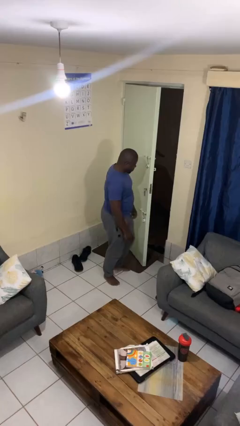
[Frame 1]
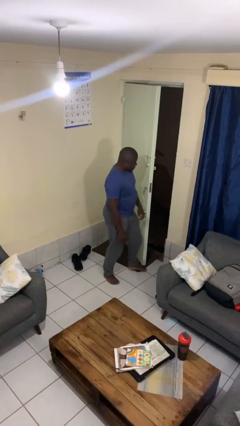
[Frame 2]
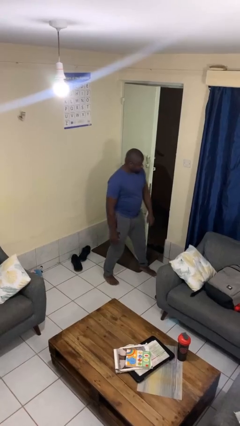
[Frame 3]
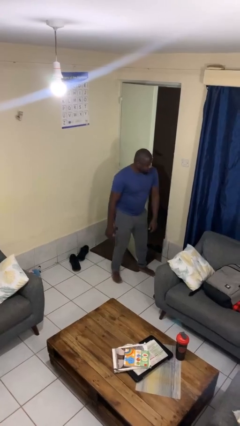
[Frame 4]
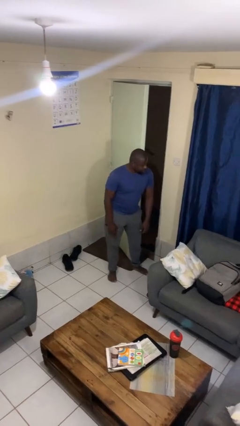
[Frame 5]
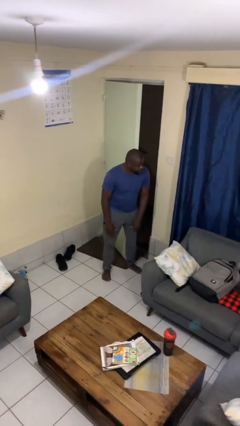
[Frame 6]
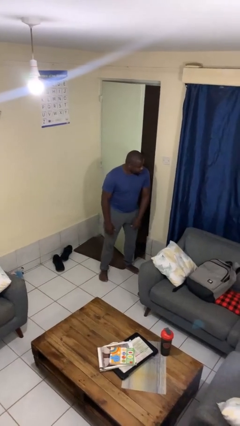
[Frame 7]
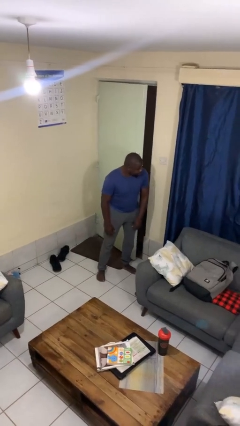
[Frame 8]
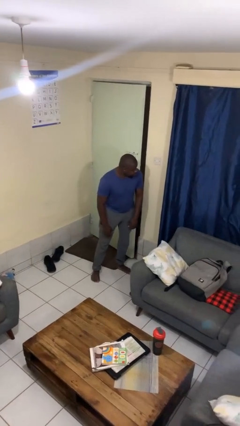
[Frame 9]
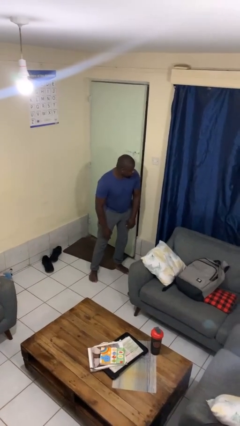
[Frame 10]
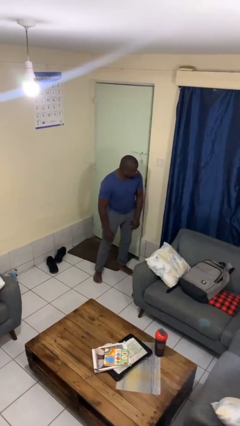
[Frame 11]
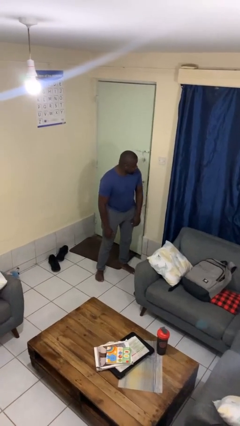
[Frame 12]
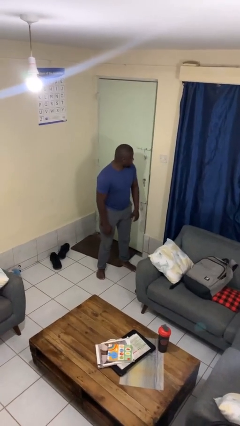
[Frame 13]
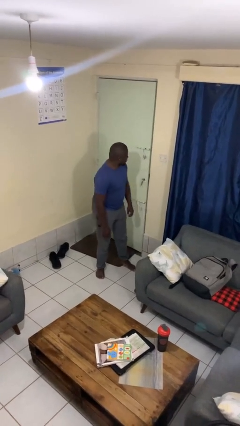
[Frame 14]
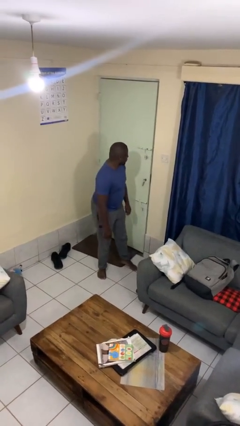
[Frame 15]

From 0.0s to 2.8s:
person closes door with hip

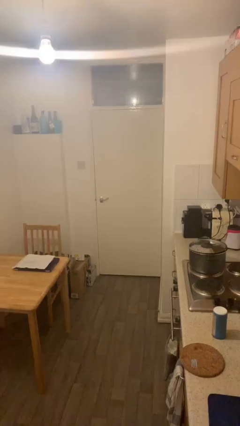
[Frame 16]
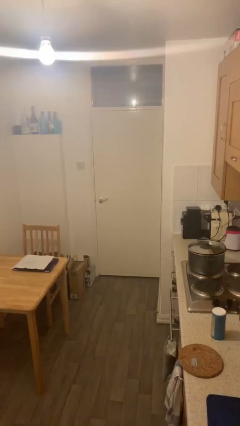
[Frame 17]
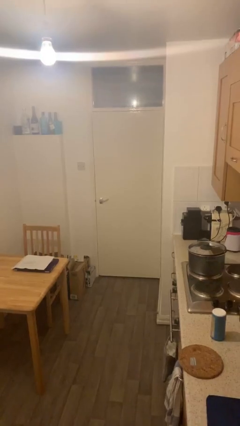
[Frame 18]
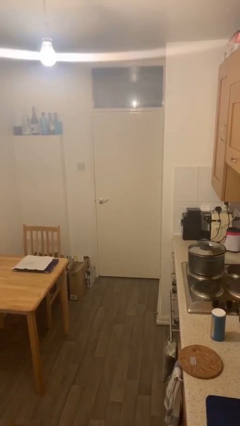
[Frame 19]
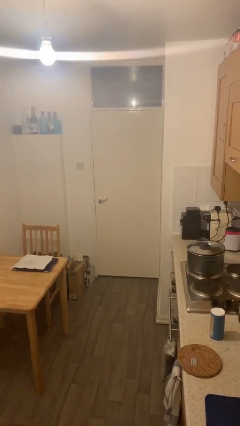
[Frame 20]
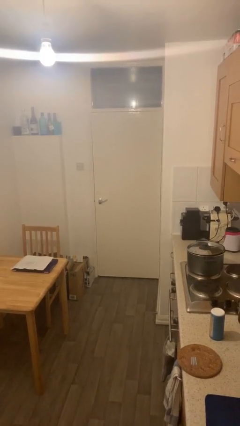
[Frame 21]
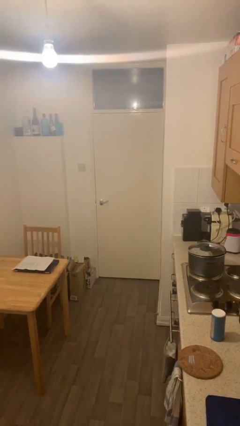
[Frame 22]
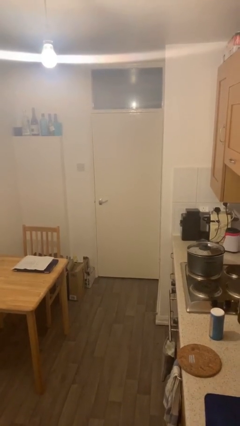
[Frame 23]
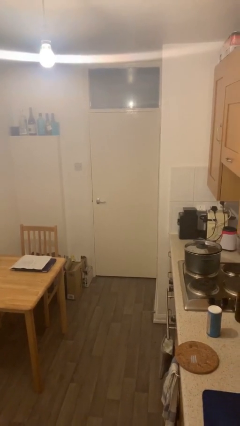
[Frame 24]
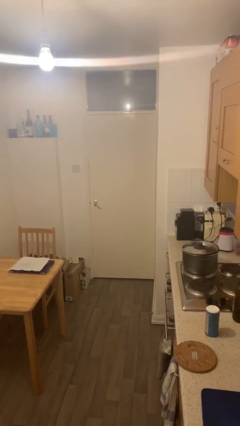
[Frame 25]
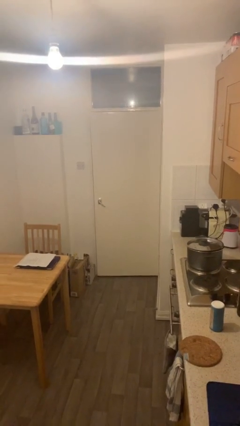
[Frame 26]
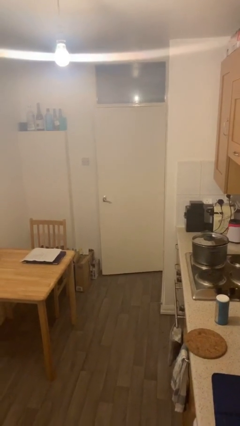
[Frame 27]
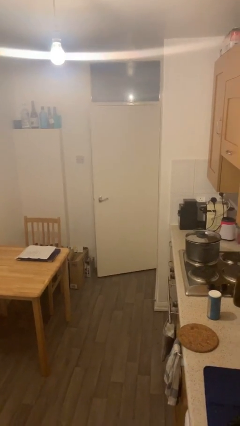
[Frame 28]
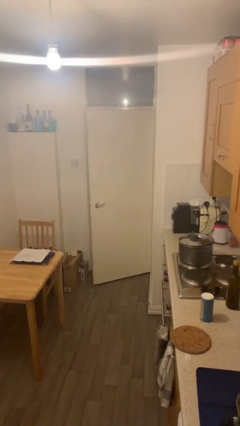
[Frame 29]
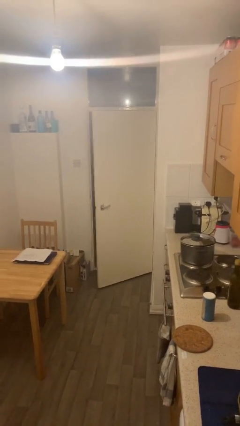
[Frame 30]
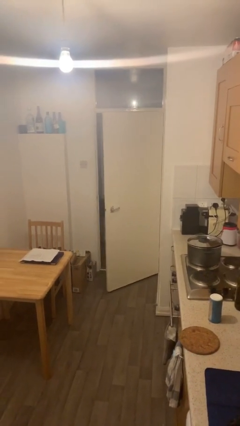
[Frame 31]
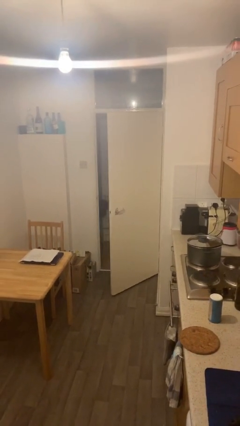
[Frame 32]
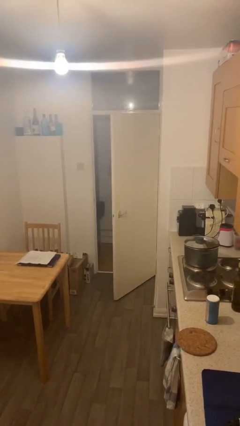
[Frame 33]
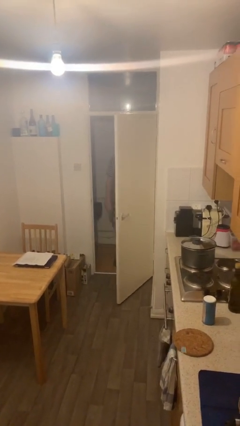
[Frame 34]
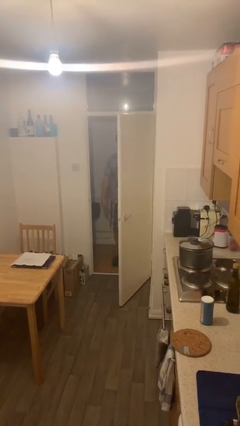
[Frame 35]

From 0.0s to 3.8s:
person opens facility door

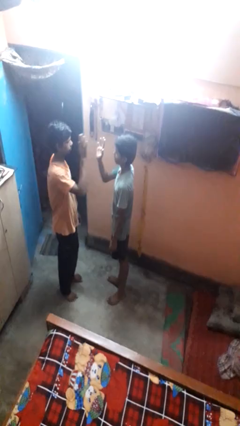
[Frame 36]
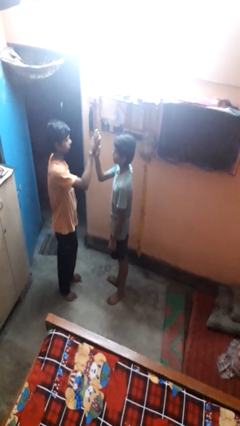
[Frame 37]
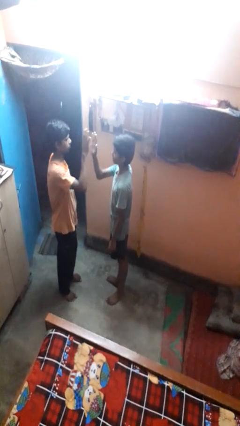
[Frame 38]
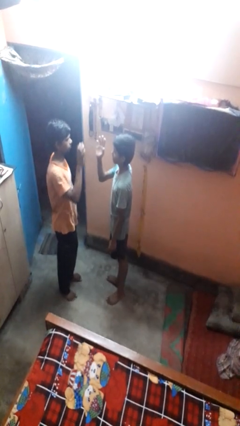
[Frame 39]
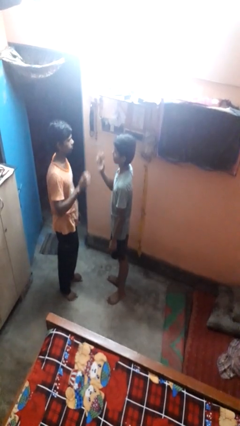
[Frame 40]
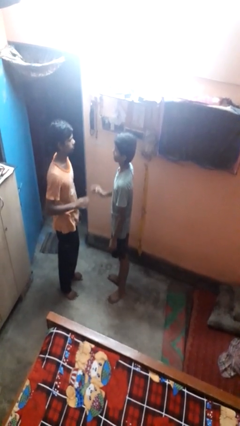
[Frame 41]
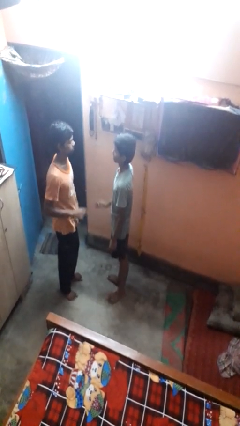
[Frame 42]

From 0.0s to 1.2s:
person highfives hand

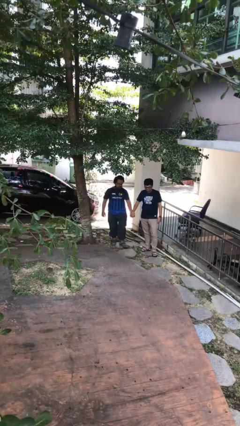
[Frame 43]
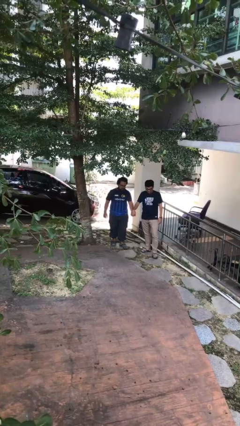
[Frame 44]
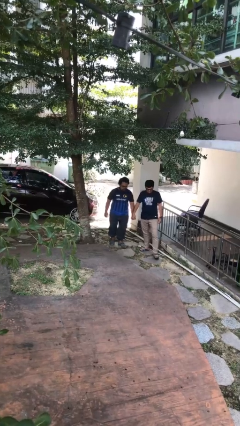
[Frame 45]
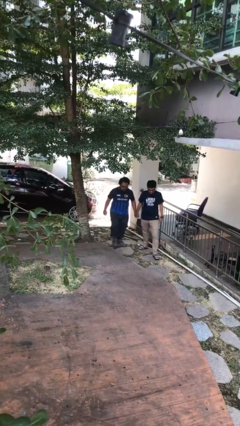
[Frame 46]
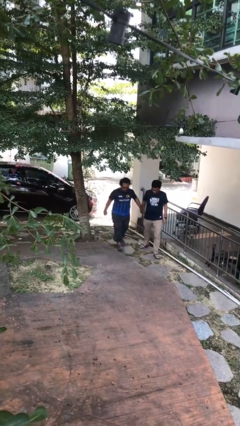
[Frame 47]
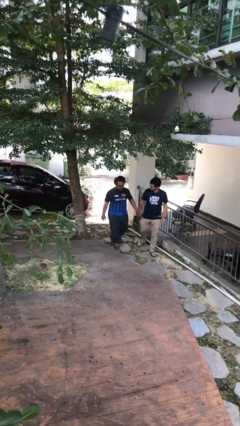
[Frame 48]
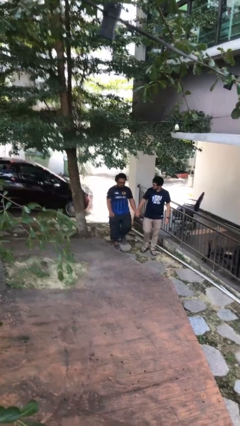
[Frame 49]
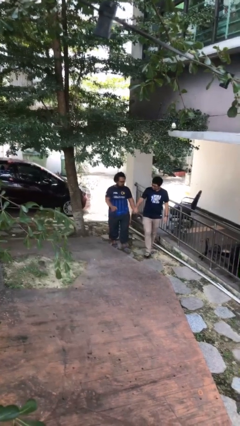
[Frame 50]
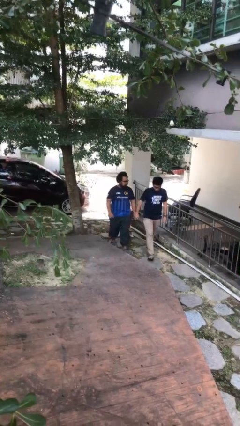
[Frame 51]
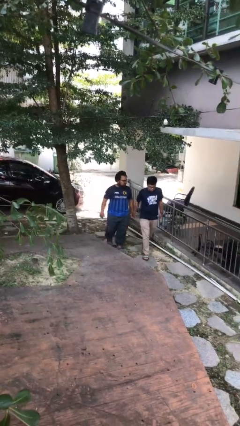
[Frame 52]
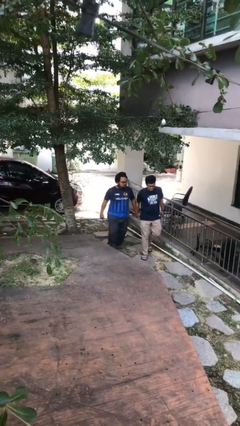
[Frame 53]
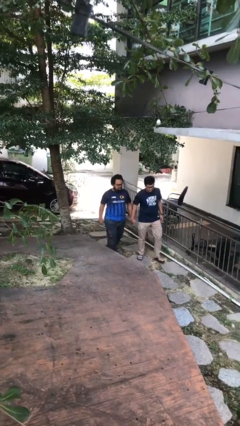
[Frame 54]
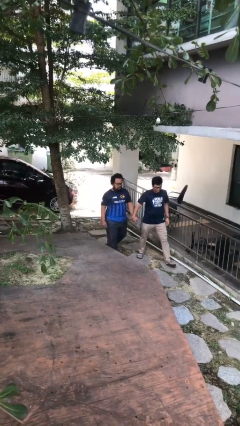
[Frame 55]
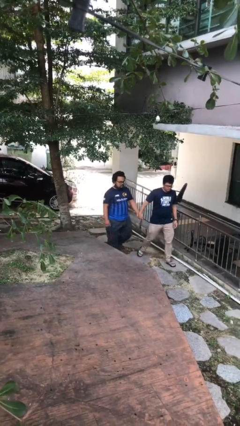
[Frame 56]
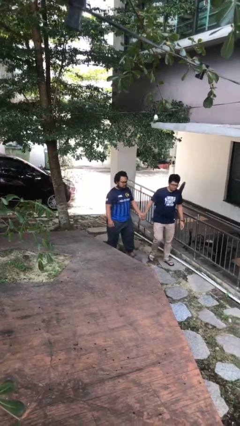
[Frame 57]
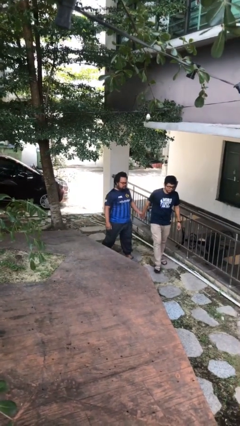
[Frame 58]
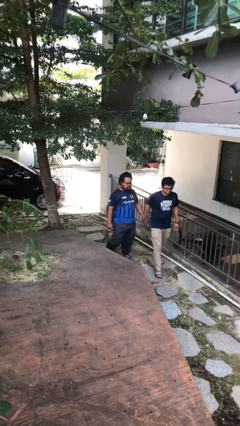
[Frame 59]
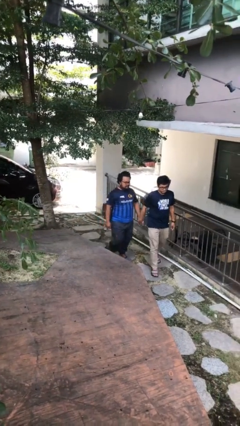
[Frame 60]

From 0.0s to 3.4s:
person holds hand

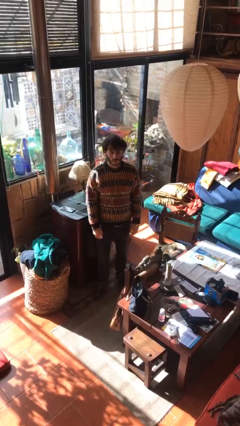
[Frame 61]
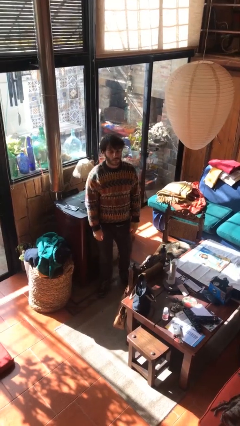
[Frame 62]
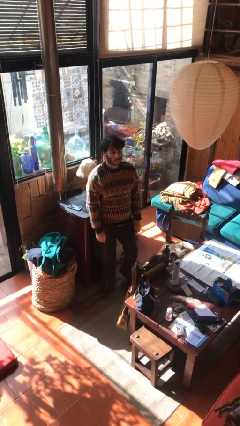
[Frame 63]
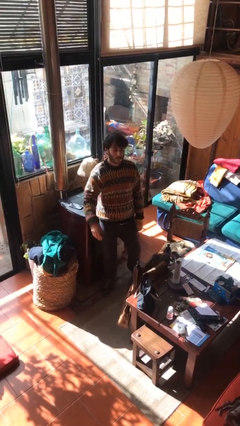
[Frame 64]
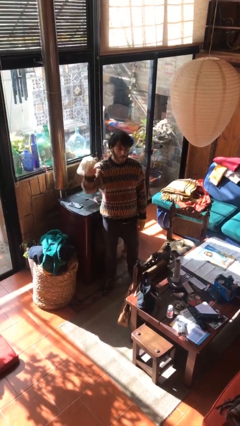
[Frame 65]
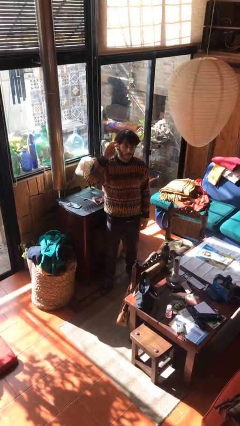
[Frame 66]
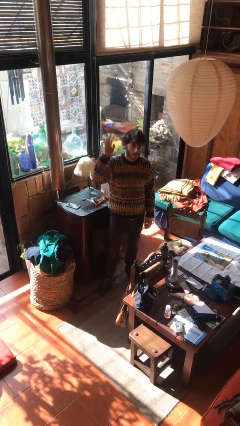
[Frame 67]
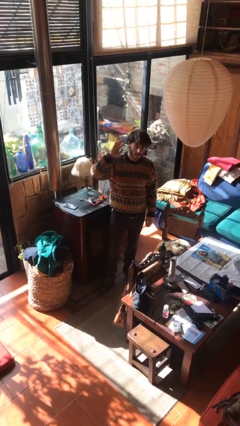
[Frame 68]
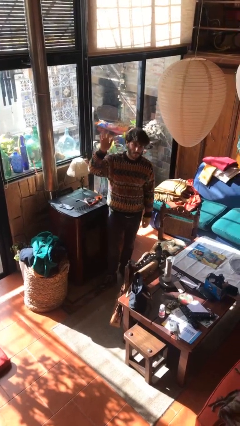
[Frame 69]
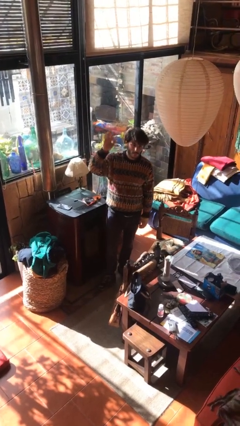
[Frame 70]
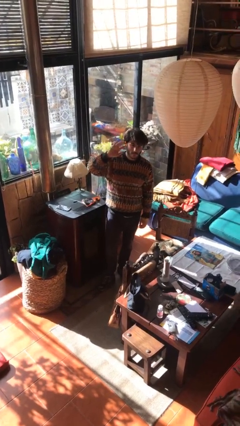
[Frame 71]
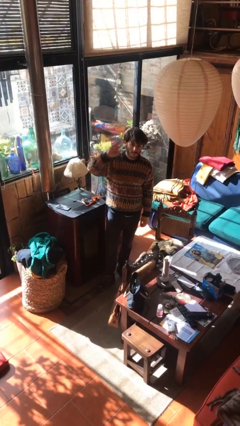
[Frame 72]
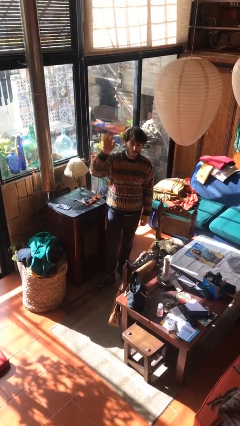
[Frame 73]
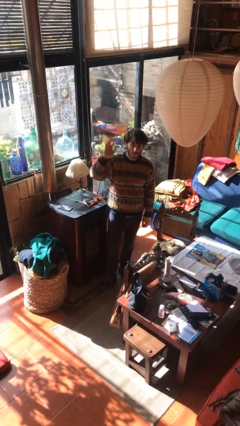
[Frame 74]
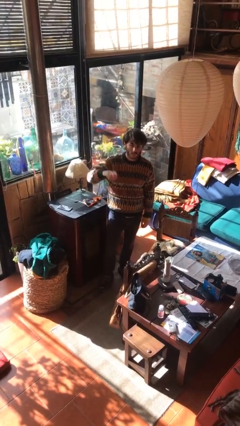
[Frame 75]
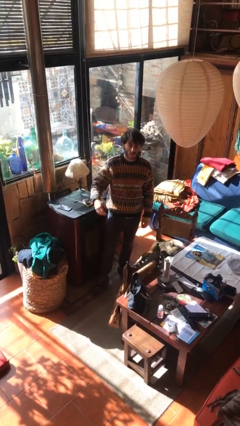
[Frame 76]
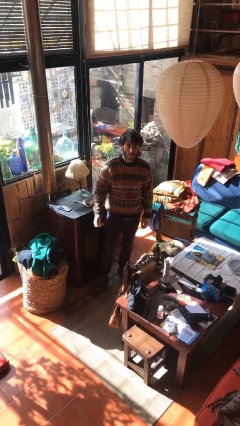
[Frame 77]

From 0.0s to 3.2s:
person waves at person

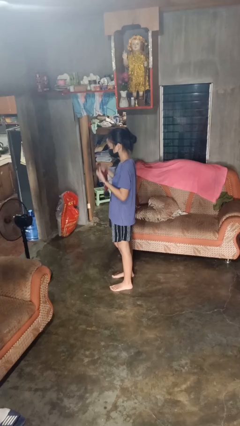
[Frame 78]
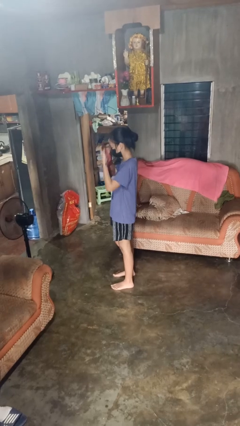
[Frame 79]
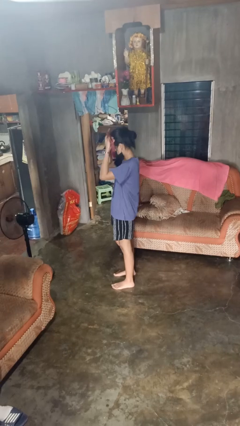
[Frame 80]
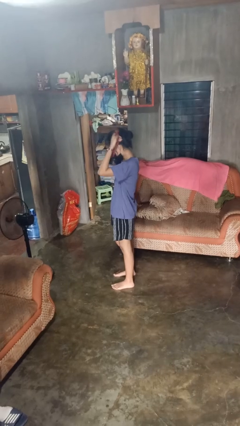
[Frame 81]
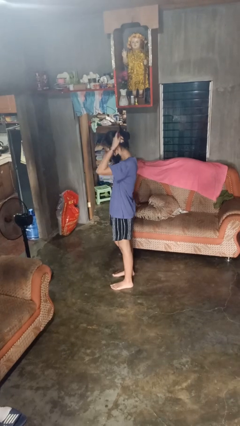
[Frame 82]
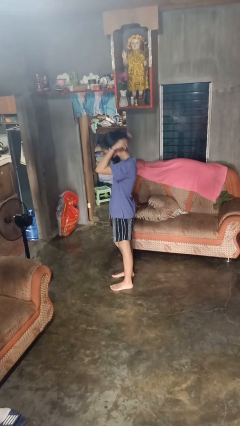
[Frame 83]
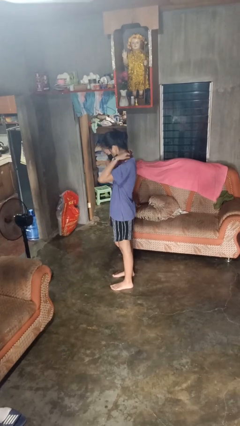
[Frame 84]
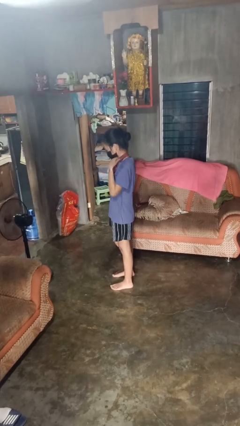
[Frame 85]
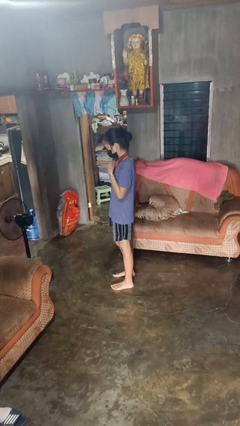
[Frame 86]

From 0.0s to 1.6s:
person puts on necklace

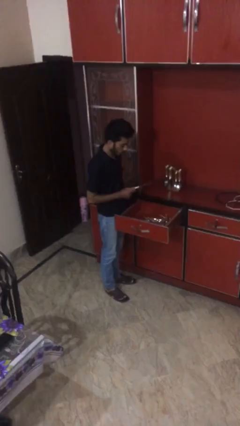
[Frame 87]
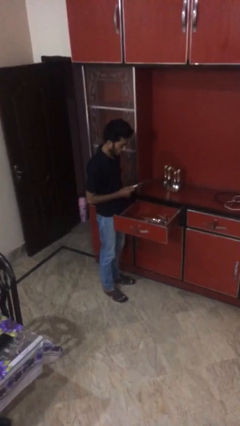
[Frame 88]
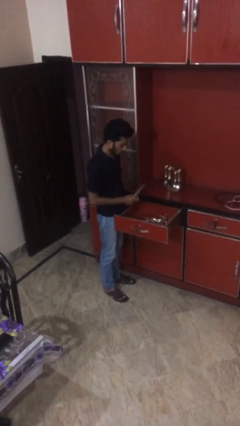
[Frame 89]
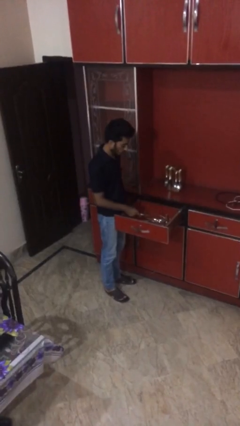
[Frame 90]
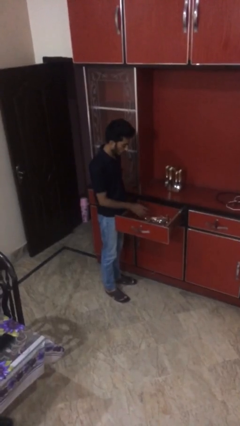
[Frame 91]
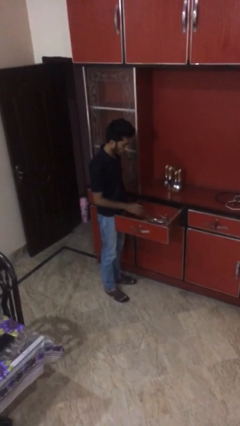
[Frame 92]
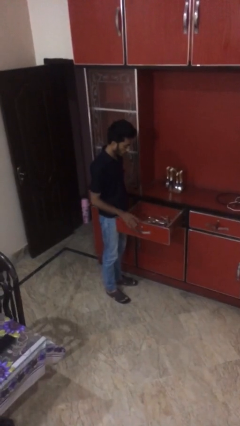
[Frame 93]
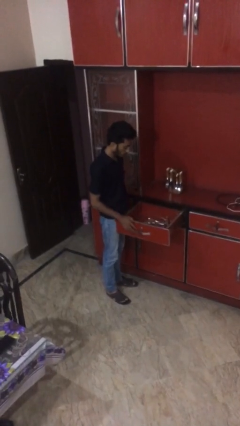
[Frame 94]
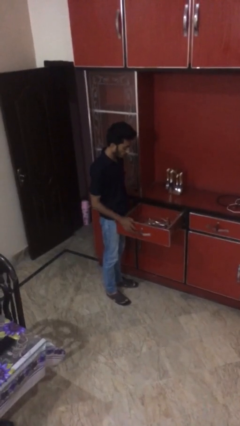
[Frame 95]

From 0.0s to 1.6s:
person puts object into kitchen drawer
